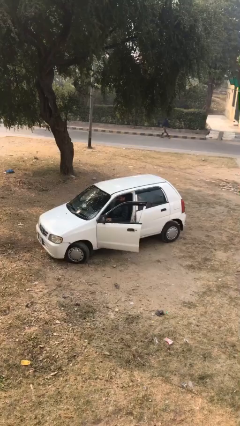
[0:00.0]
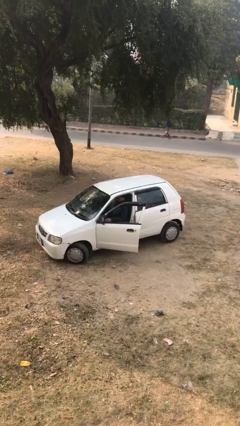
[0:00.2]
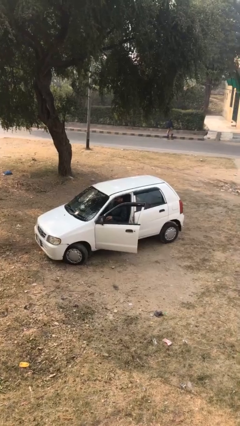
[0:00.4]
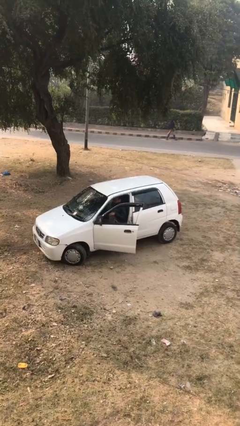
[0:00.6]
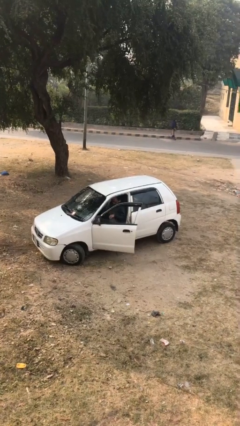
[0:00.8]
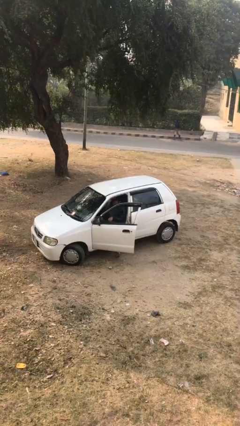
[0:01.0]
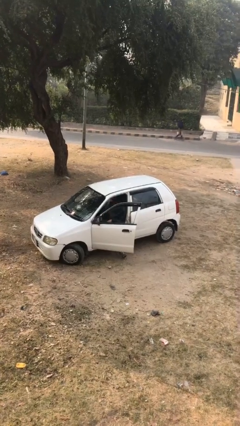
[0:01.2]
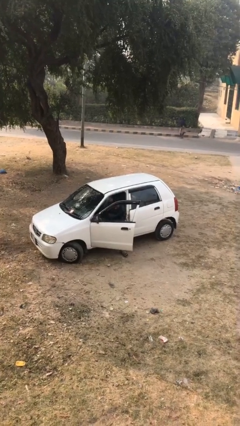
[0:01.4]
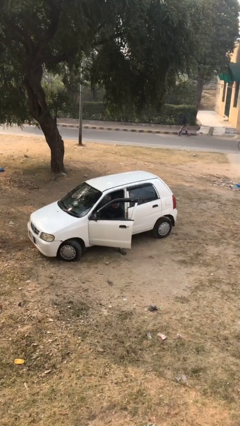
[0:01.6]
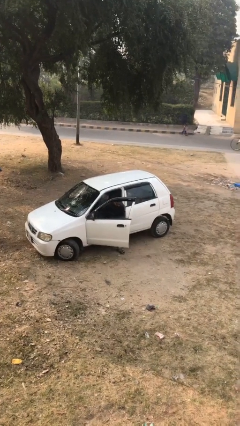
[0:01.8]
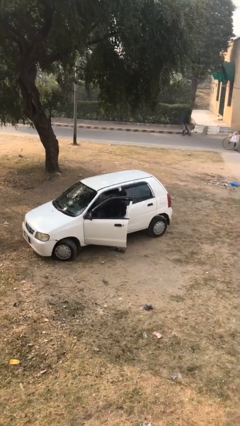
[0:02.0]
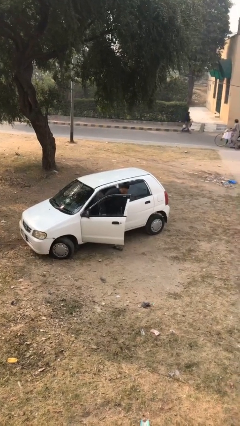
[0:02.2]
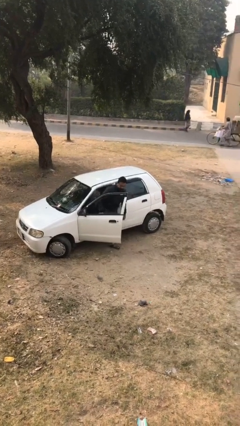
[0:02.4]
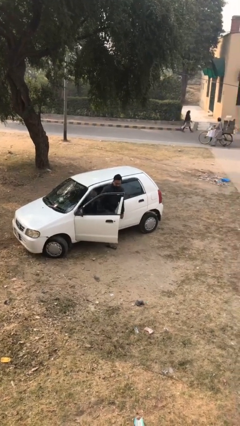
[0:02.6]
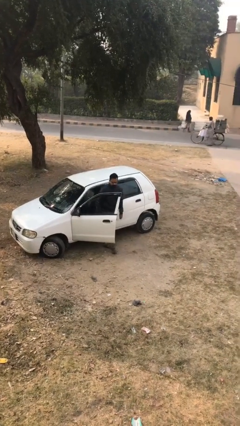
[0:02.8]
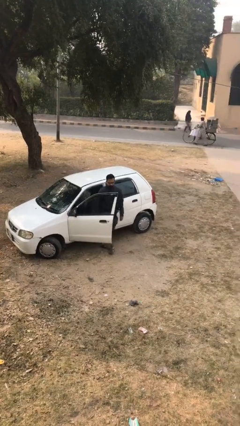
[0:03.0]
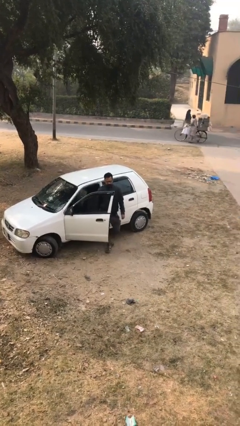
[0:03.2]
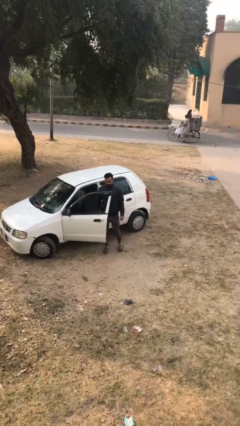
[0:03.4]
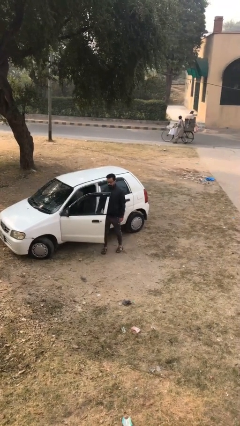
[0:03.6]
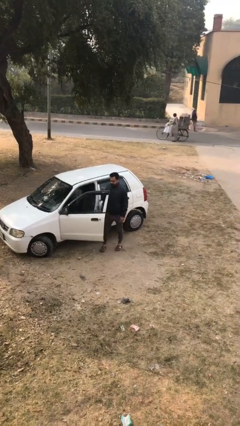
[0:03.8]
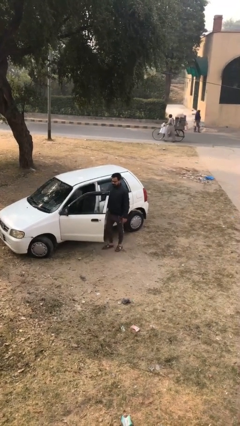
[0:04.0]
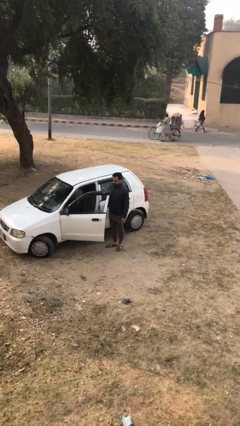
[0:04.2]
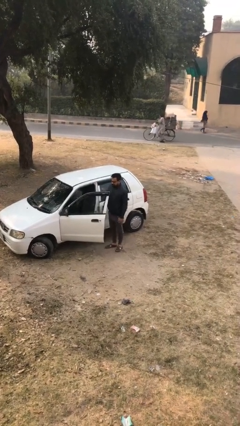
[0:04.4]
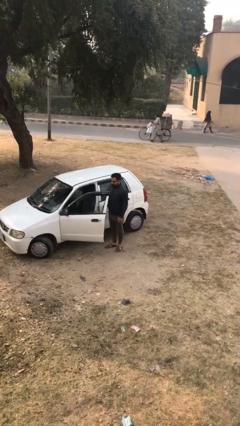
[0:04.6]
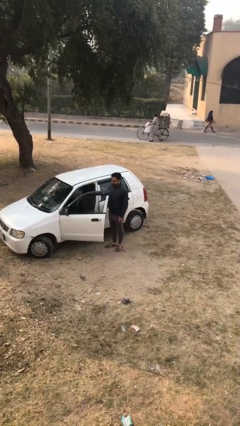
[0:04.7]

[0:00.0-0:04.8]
person exits car

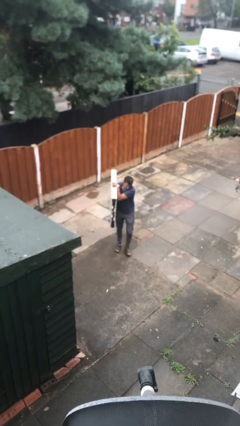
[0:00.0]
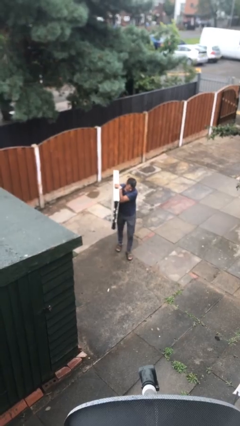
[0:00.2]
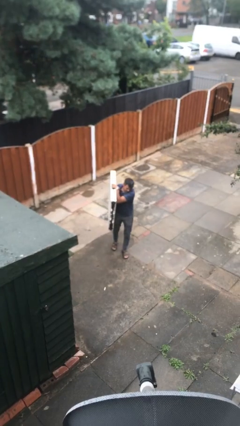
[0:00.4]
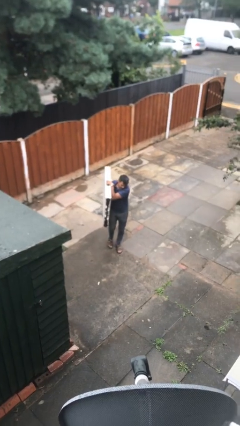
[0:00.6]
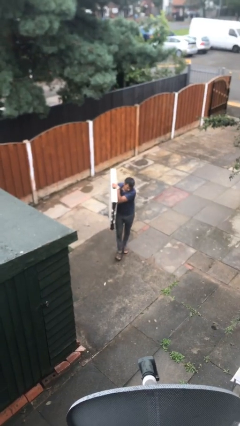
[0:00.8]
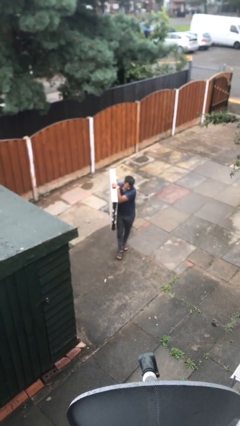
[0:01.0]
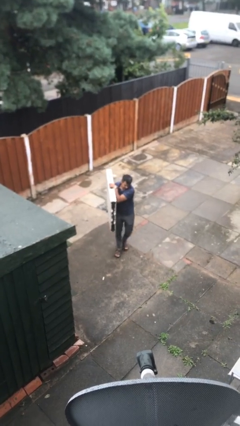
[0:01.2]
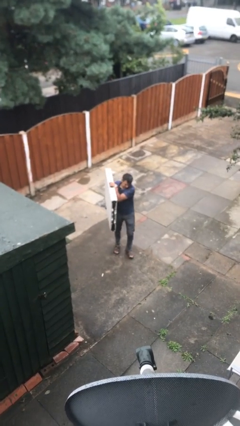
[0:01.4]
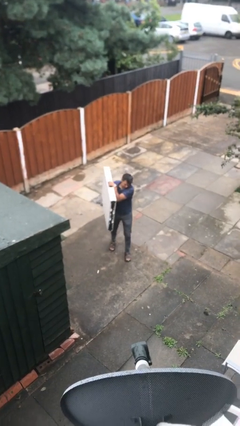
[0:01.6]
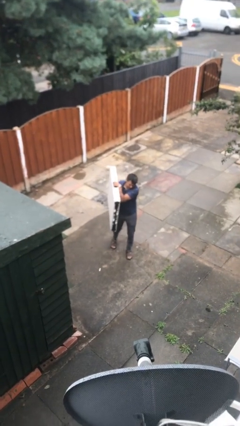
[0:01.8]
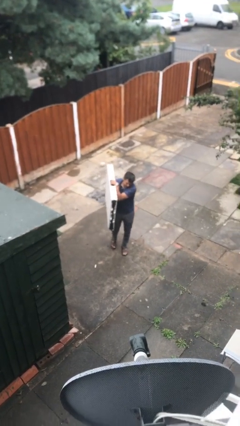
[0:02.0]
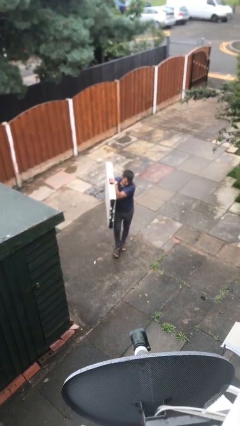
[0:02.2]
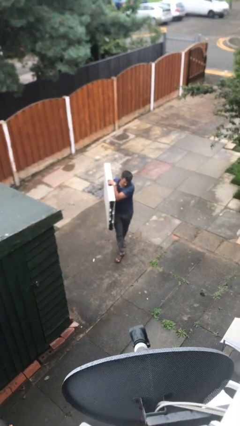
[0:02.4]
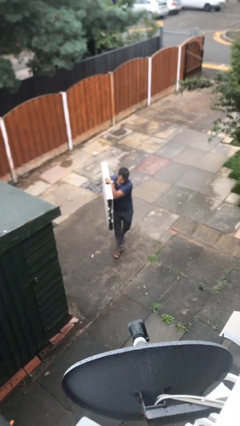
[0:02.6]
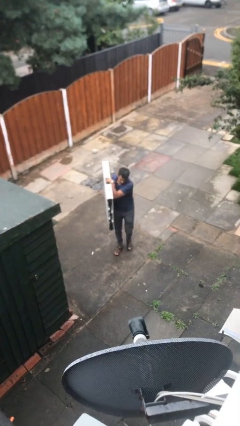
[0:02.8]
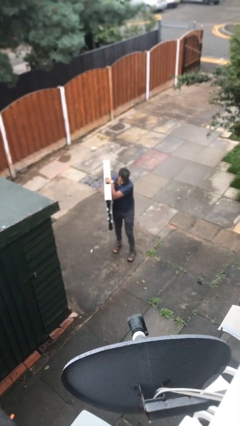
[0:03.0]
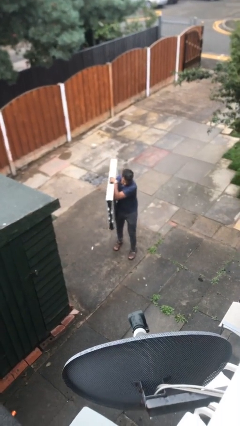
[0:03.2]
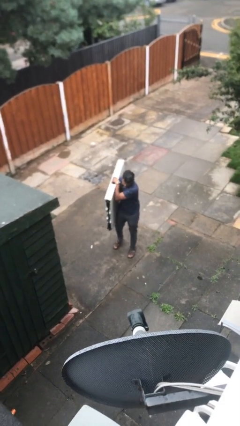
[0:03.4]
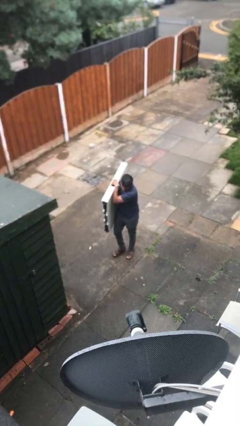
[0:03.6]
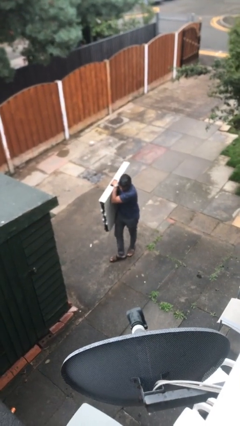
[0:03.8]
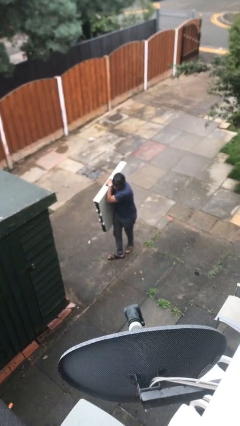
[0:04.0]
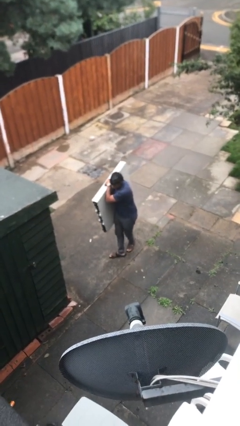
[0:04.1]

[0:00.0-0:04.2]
person carries heavy object

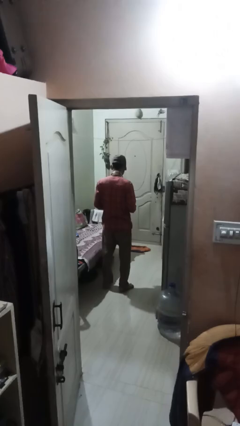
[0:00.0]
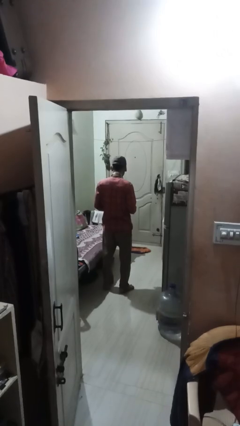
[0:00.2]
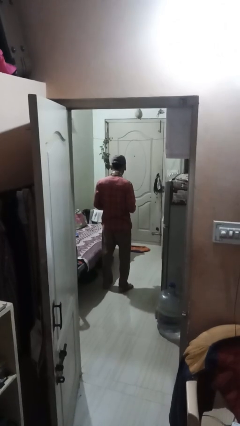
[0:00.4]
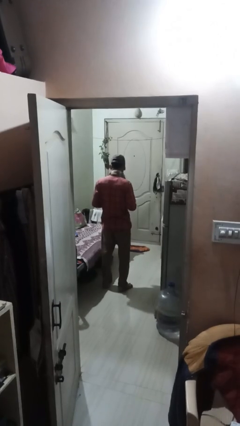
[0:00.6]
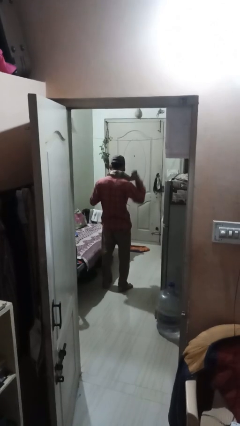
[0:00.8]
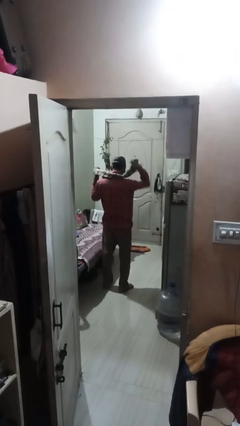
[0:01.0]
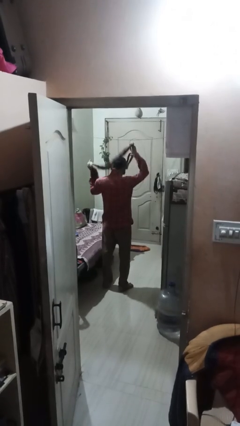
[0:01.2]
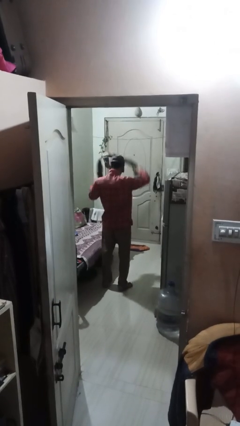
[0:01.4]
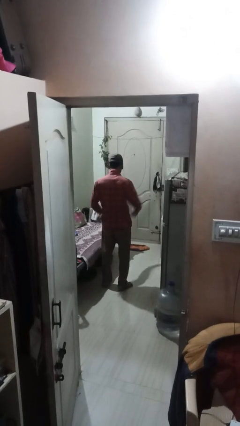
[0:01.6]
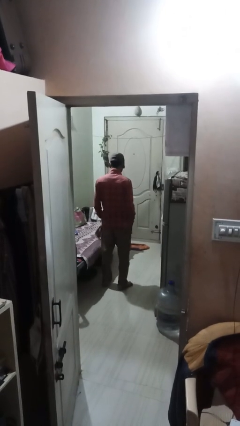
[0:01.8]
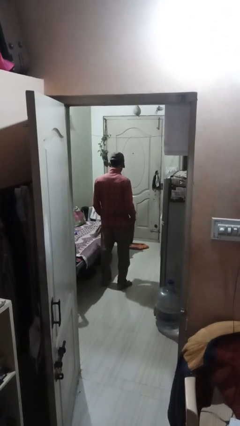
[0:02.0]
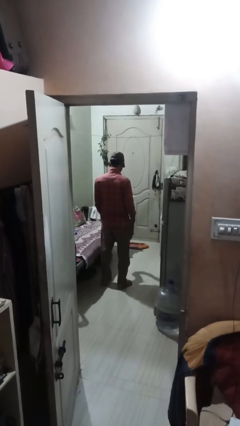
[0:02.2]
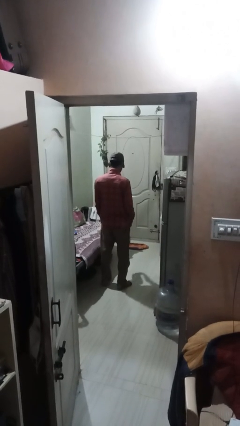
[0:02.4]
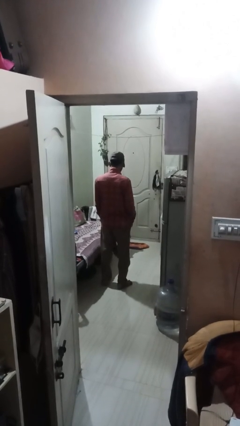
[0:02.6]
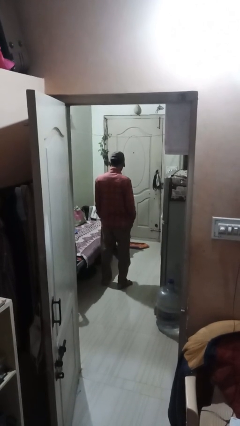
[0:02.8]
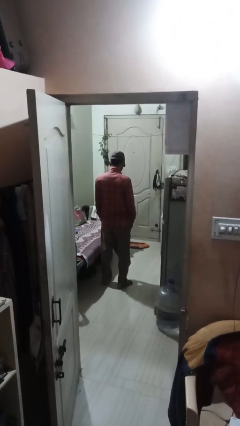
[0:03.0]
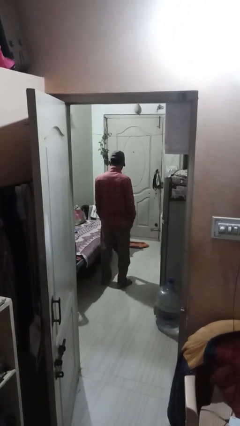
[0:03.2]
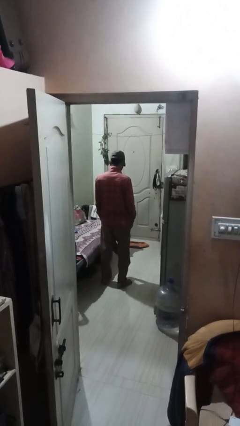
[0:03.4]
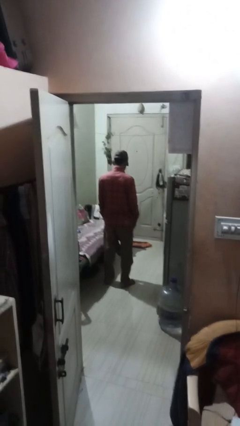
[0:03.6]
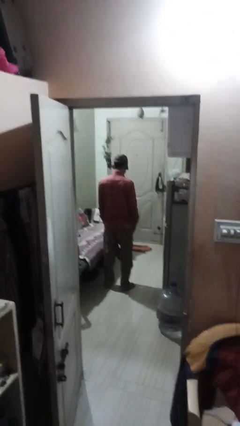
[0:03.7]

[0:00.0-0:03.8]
person takes off scarf

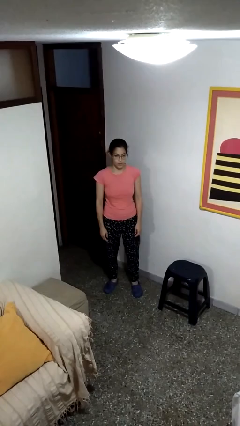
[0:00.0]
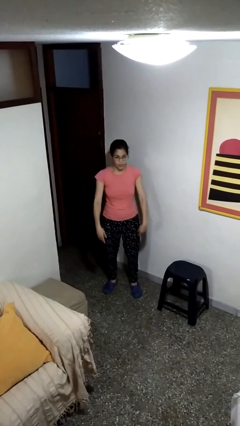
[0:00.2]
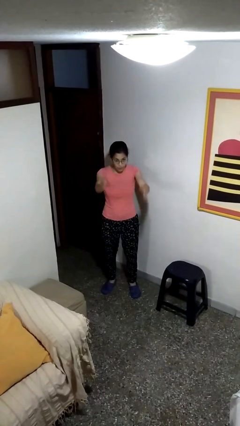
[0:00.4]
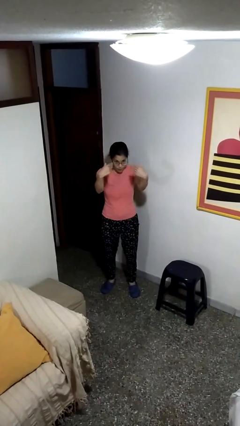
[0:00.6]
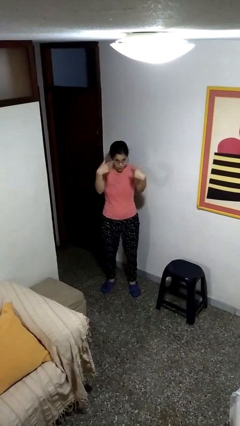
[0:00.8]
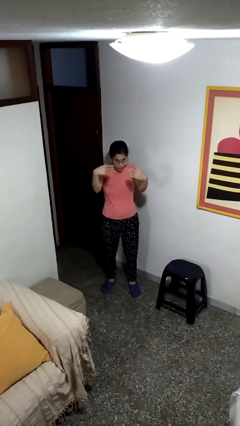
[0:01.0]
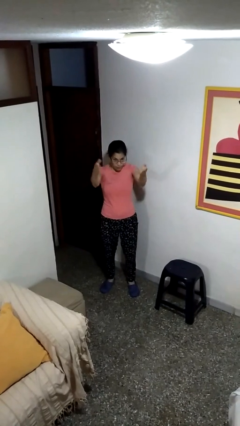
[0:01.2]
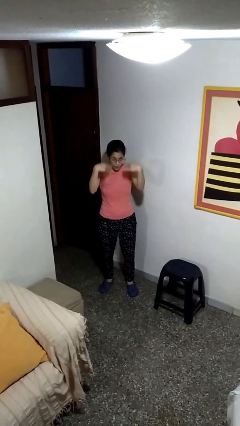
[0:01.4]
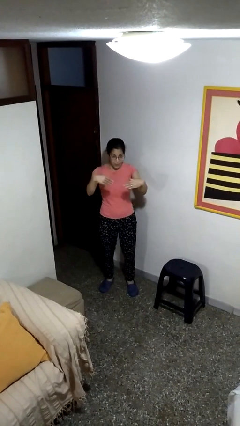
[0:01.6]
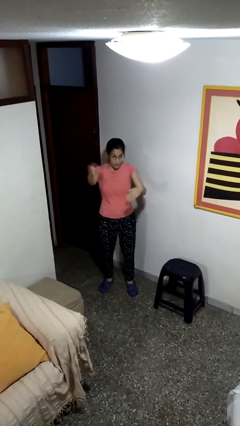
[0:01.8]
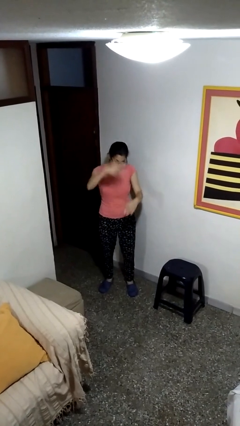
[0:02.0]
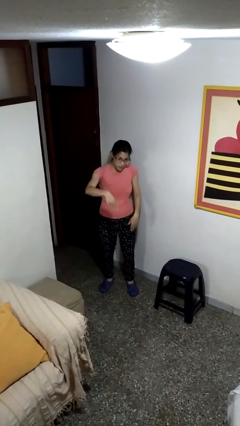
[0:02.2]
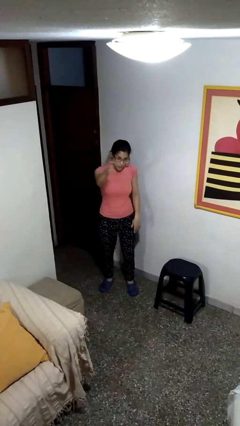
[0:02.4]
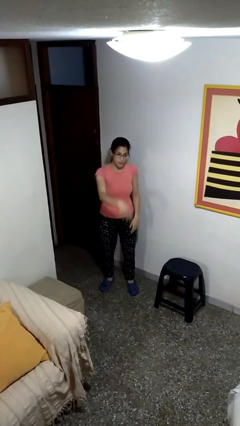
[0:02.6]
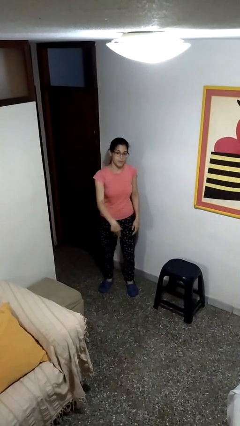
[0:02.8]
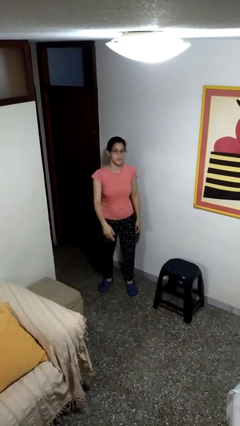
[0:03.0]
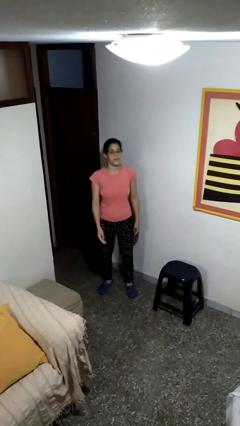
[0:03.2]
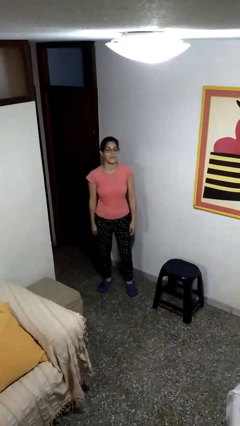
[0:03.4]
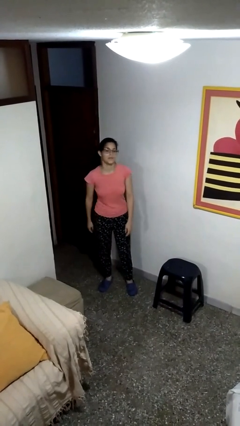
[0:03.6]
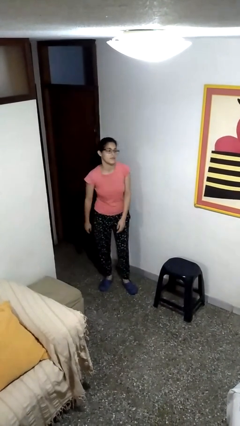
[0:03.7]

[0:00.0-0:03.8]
person gestures come here

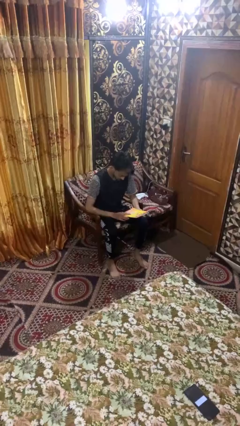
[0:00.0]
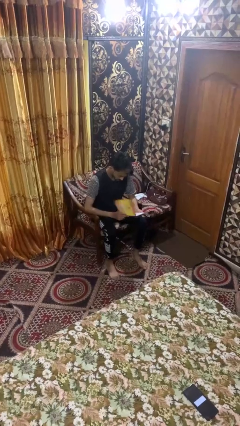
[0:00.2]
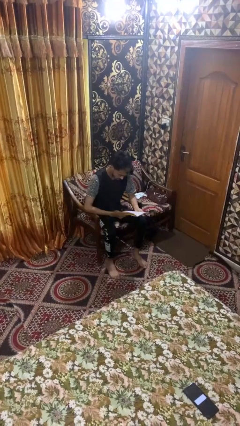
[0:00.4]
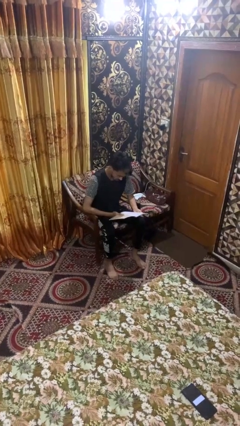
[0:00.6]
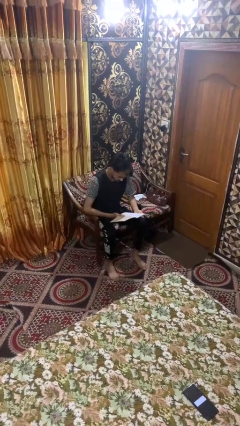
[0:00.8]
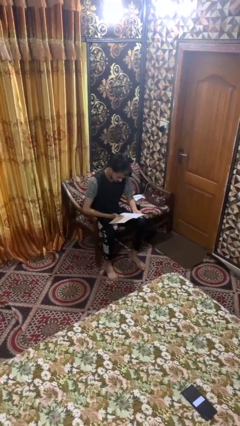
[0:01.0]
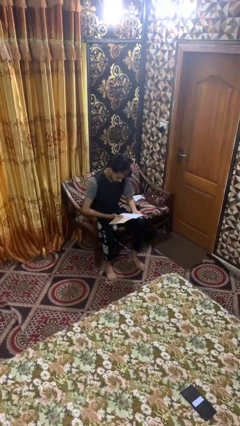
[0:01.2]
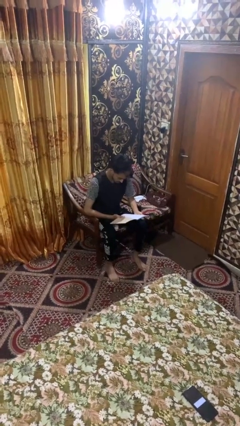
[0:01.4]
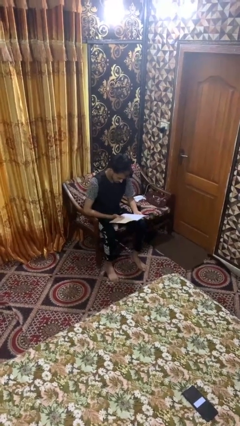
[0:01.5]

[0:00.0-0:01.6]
person reads magazine
